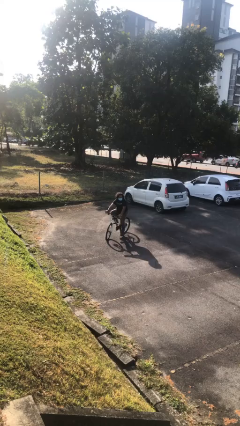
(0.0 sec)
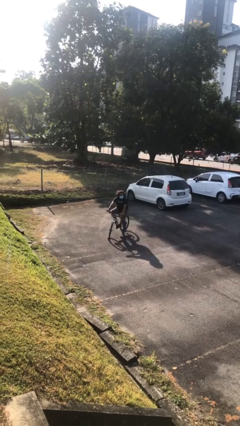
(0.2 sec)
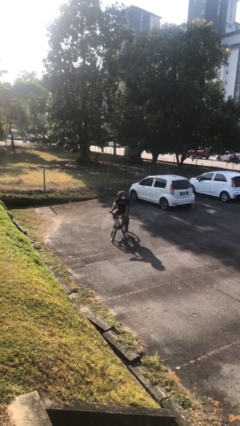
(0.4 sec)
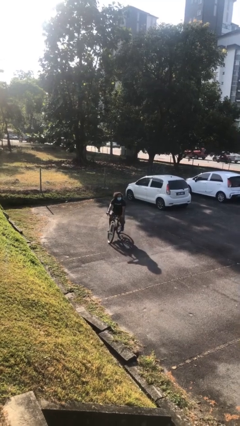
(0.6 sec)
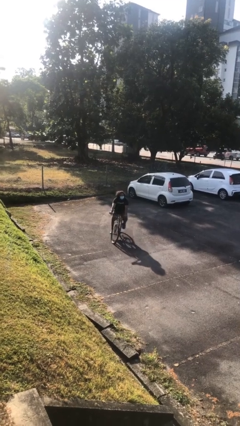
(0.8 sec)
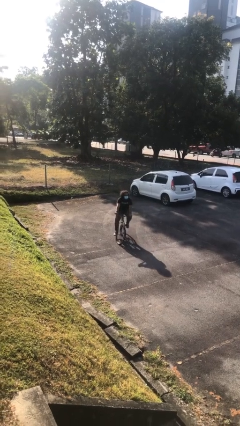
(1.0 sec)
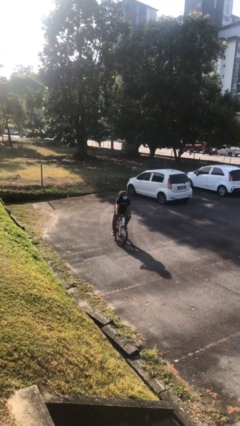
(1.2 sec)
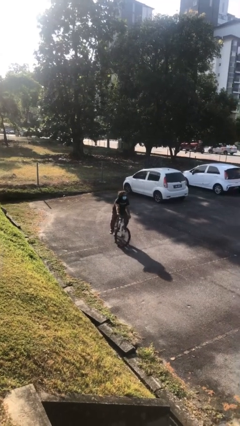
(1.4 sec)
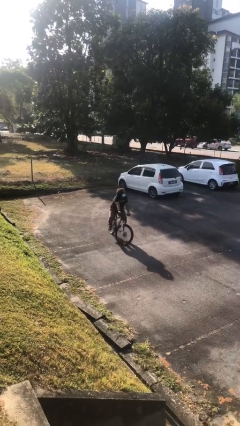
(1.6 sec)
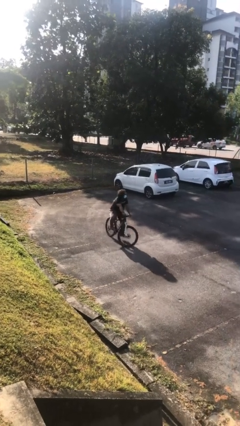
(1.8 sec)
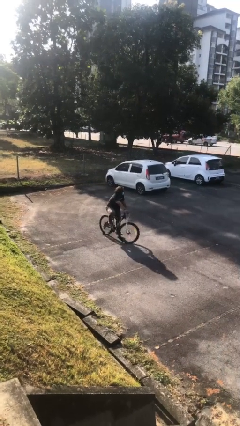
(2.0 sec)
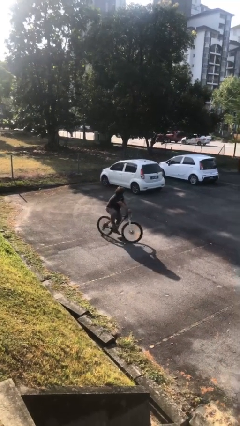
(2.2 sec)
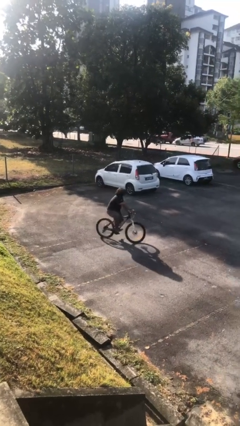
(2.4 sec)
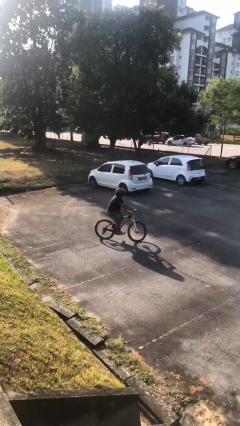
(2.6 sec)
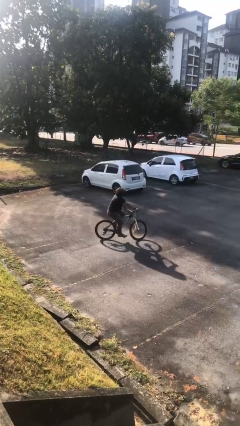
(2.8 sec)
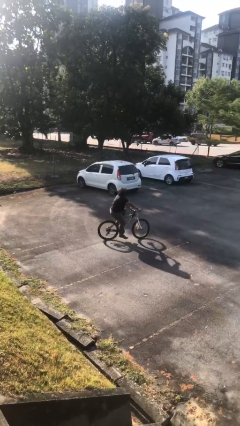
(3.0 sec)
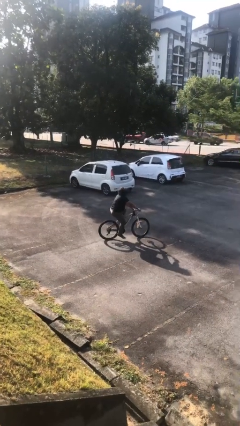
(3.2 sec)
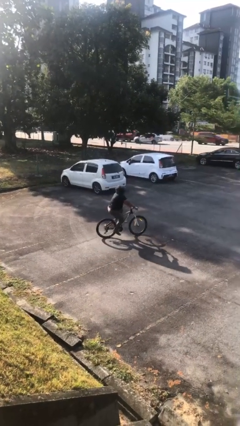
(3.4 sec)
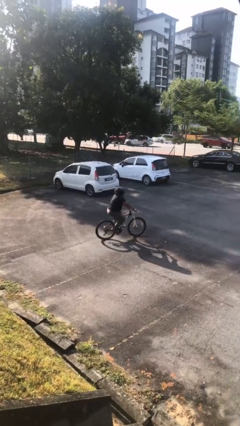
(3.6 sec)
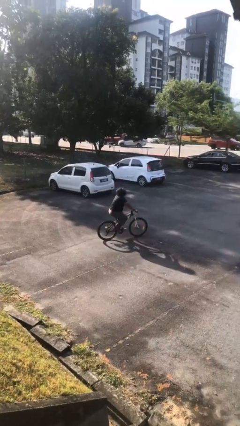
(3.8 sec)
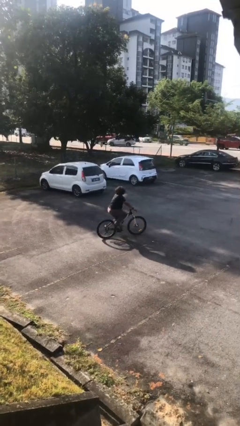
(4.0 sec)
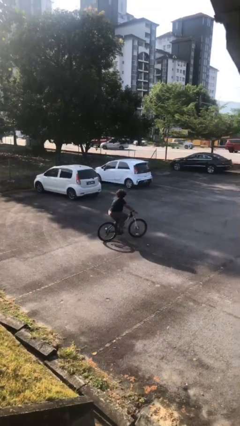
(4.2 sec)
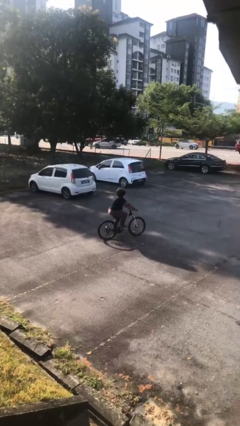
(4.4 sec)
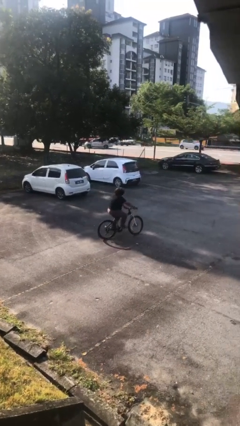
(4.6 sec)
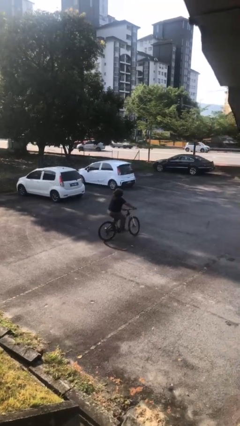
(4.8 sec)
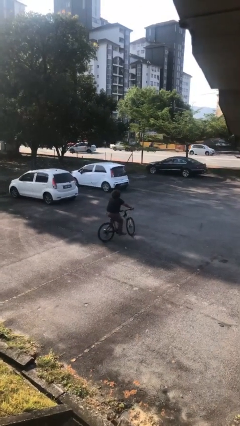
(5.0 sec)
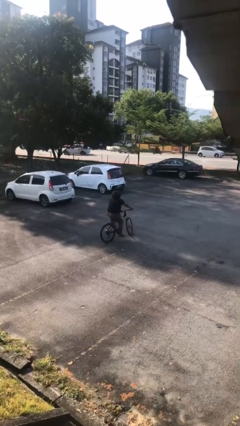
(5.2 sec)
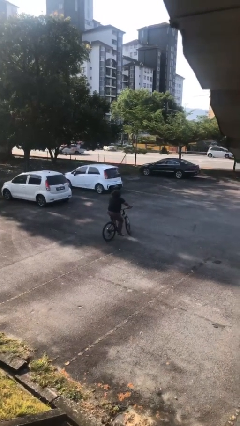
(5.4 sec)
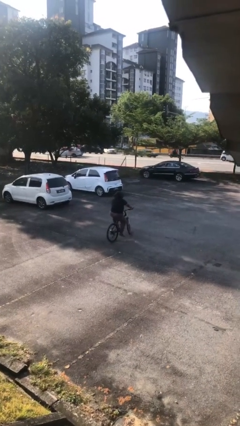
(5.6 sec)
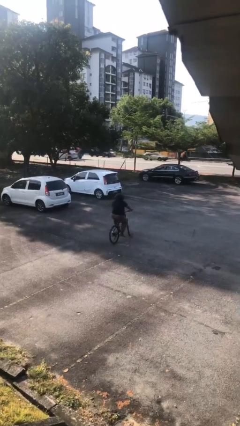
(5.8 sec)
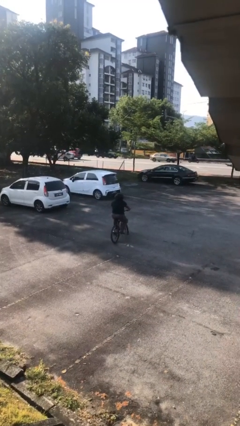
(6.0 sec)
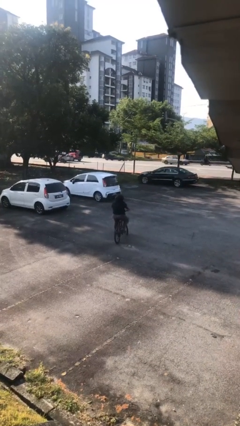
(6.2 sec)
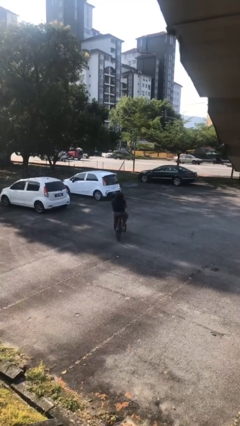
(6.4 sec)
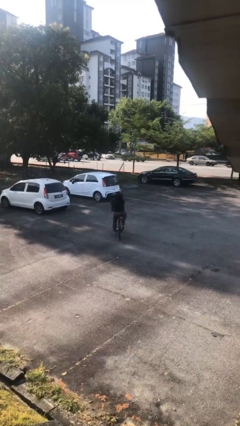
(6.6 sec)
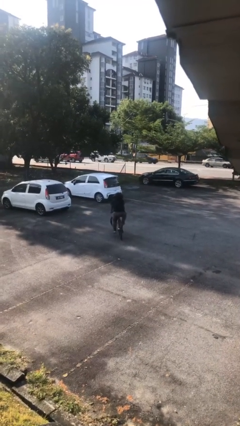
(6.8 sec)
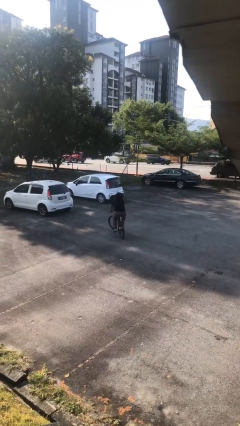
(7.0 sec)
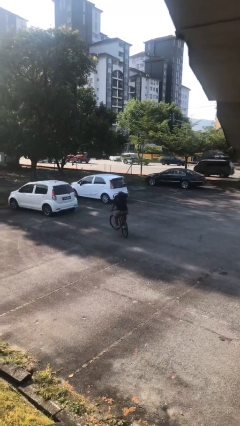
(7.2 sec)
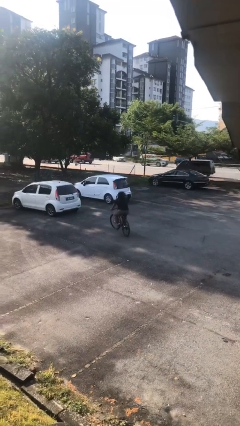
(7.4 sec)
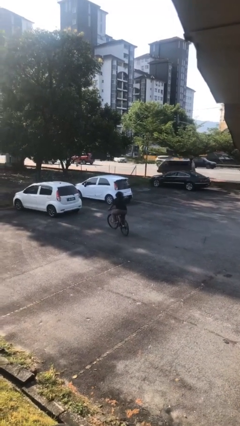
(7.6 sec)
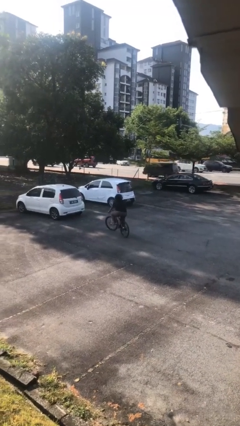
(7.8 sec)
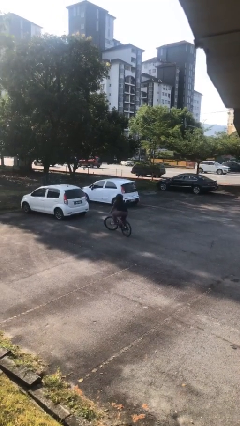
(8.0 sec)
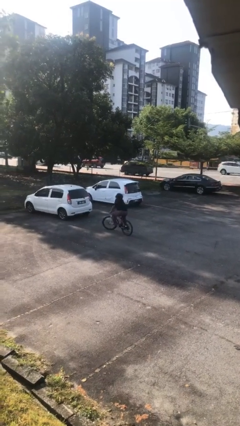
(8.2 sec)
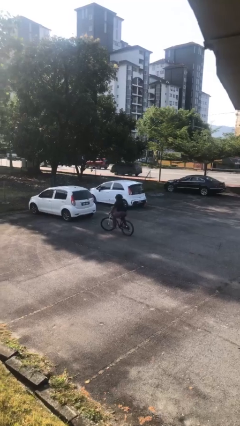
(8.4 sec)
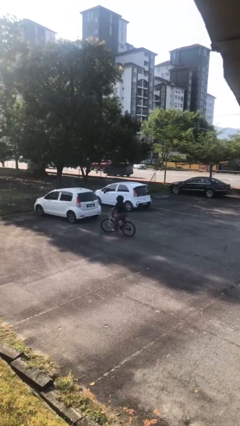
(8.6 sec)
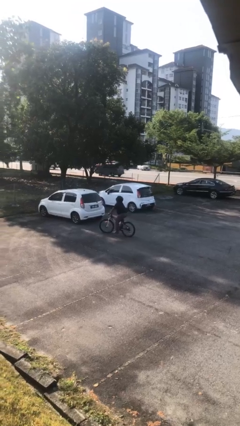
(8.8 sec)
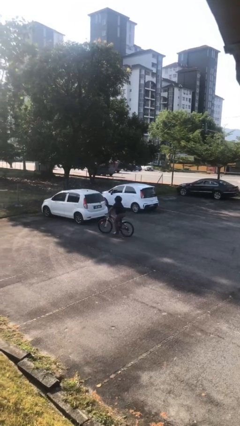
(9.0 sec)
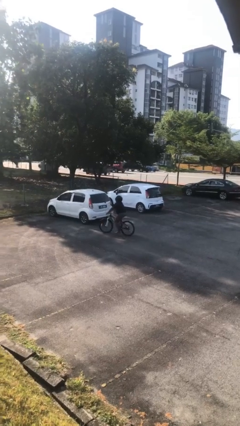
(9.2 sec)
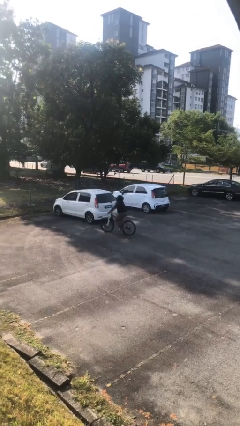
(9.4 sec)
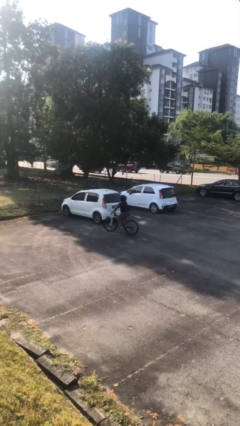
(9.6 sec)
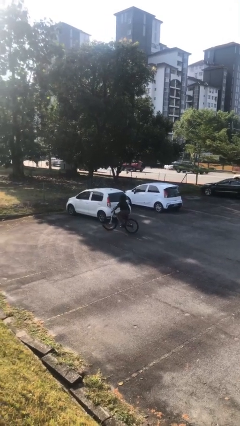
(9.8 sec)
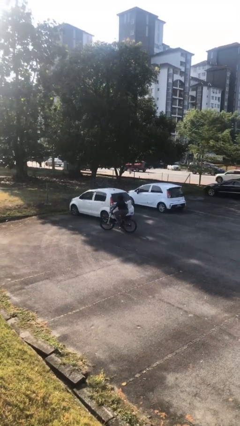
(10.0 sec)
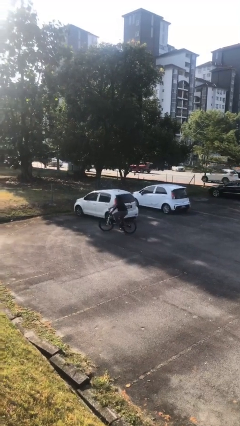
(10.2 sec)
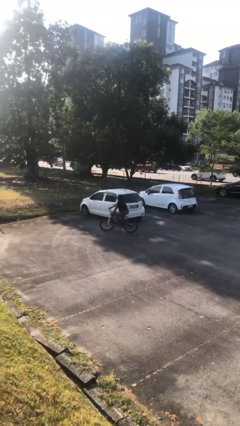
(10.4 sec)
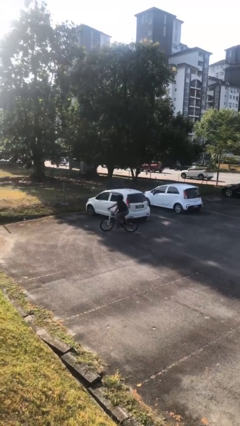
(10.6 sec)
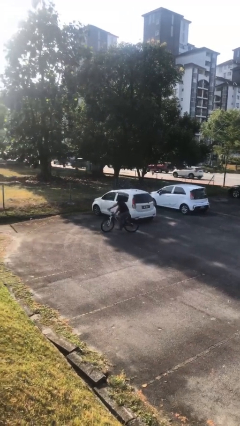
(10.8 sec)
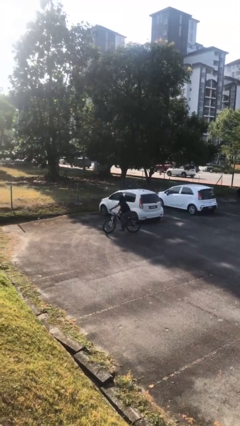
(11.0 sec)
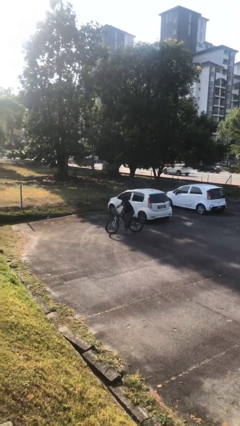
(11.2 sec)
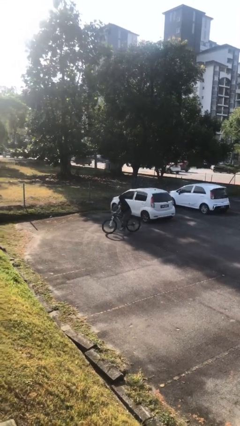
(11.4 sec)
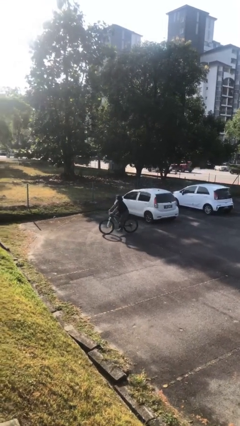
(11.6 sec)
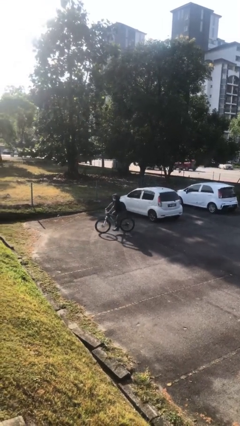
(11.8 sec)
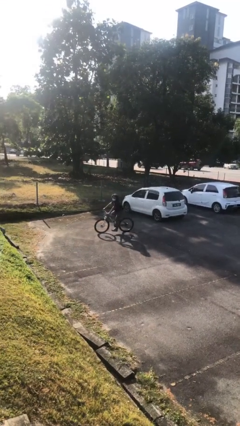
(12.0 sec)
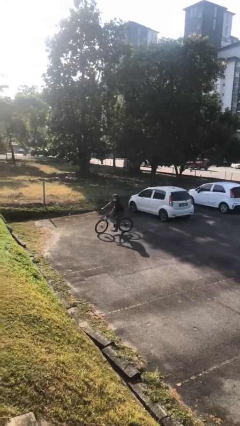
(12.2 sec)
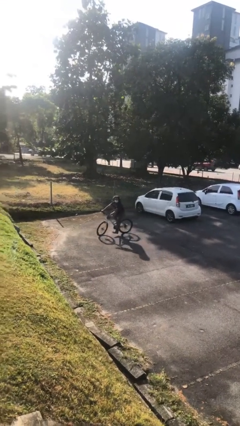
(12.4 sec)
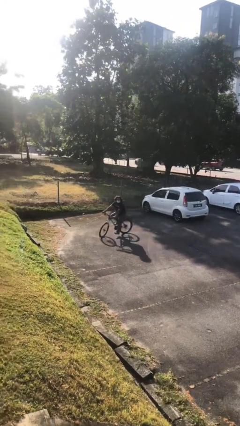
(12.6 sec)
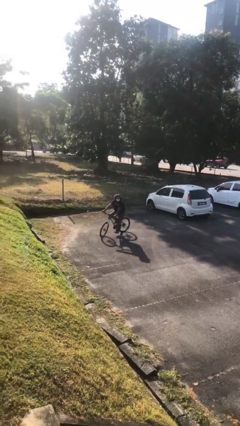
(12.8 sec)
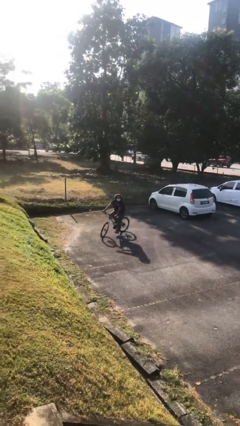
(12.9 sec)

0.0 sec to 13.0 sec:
person rides bicycle

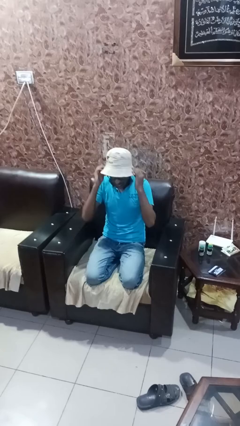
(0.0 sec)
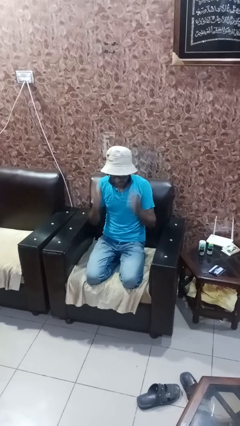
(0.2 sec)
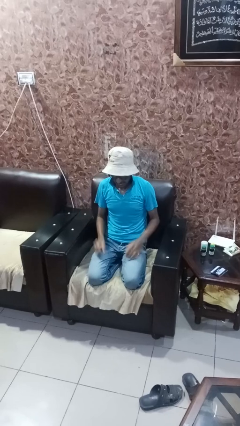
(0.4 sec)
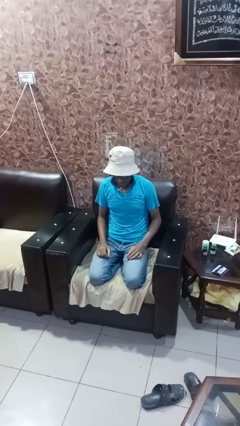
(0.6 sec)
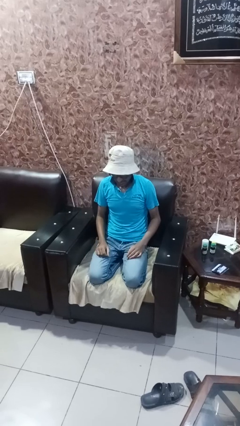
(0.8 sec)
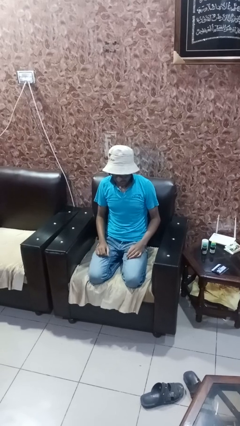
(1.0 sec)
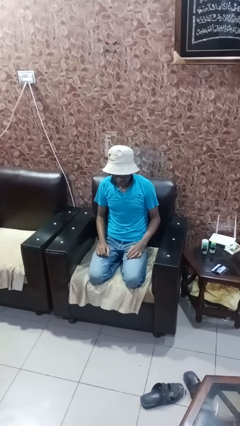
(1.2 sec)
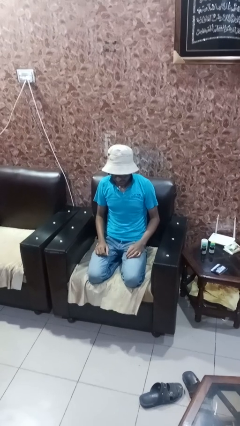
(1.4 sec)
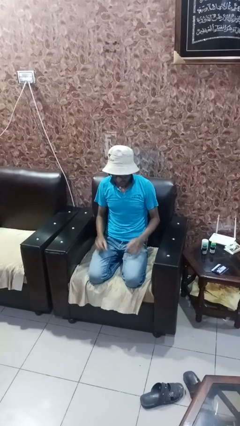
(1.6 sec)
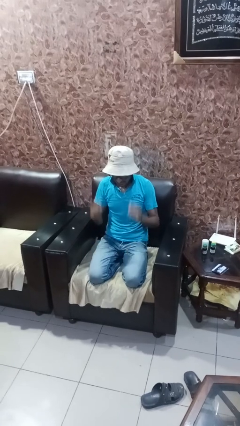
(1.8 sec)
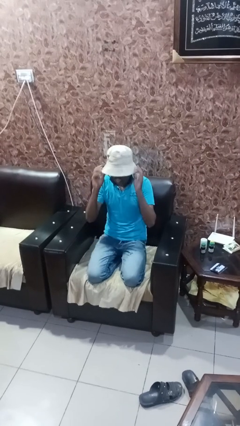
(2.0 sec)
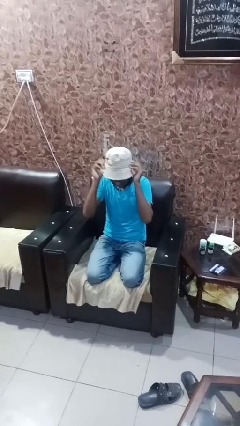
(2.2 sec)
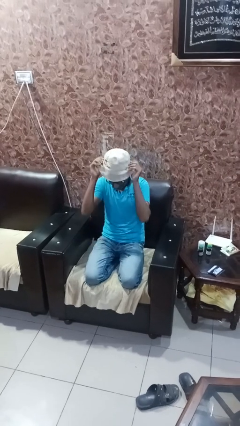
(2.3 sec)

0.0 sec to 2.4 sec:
person puts on hat

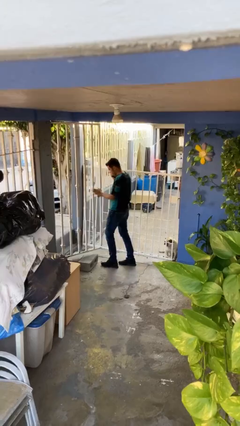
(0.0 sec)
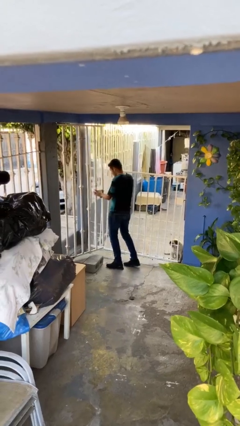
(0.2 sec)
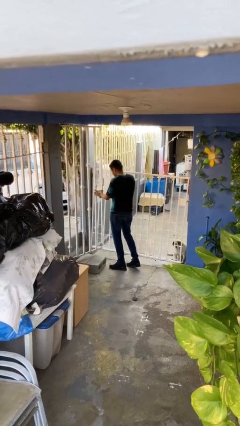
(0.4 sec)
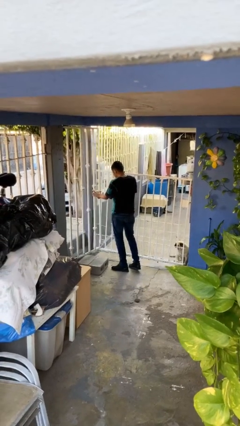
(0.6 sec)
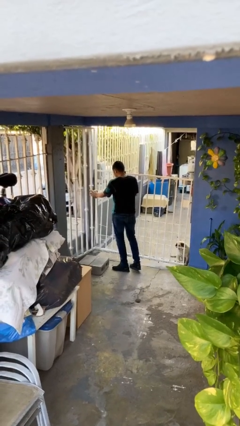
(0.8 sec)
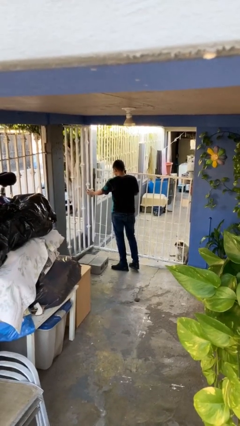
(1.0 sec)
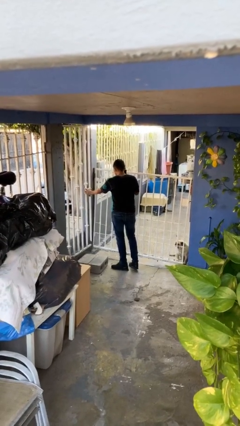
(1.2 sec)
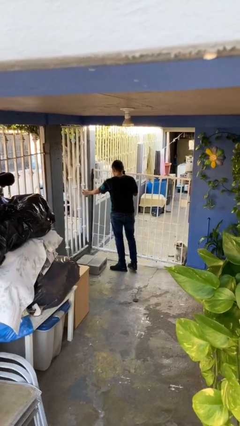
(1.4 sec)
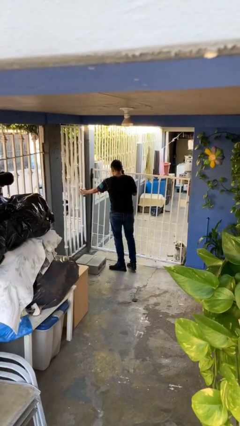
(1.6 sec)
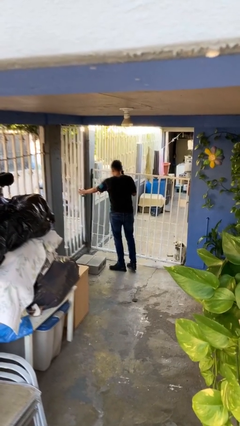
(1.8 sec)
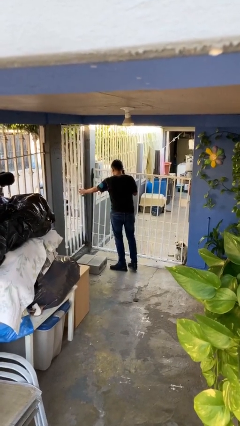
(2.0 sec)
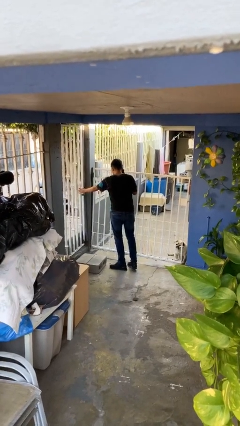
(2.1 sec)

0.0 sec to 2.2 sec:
person closes facility door

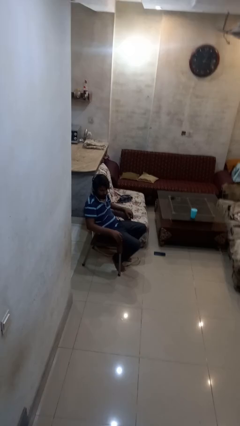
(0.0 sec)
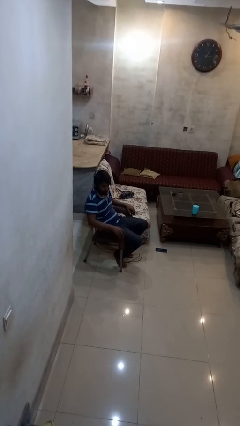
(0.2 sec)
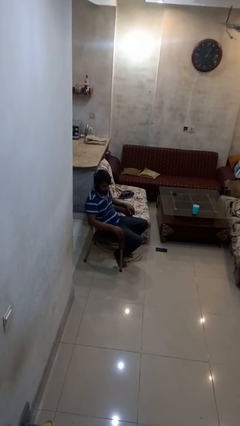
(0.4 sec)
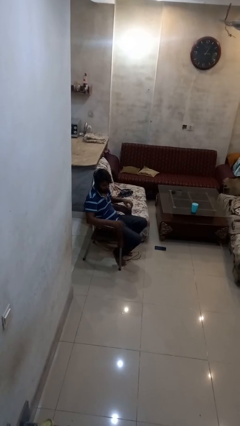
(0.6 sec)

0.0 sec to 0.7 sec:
person takes off headphones
